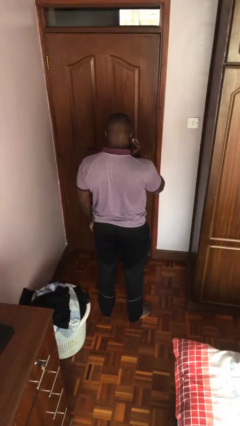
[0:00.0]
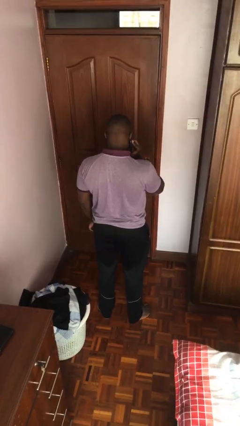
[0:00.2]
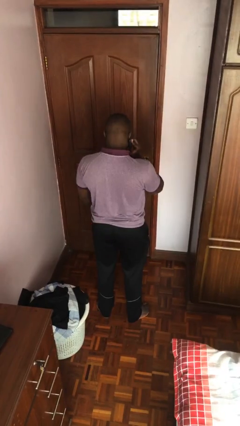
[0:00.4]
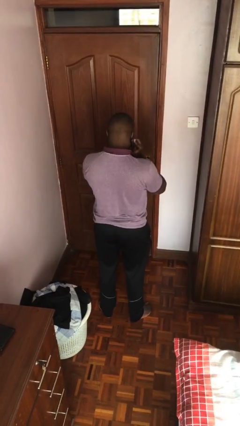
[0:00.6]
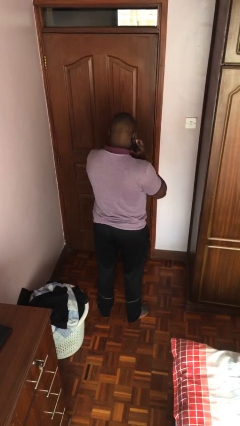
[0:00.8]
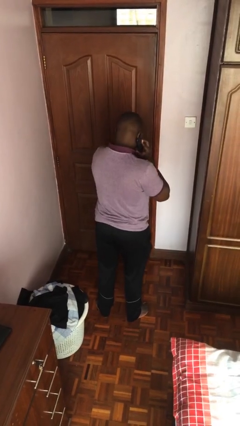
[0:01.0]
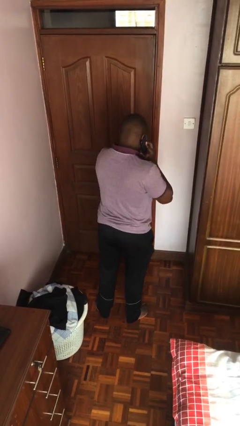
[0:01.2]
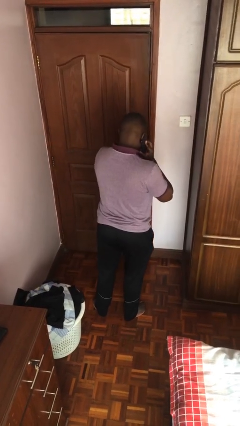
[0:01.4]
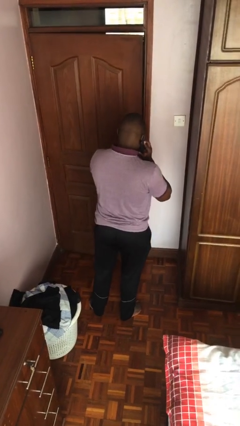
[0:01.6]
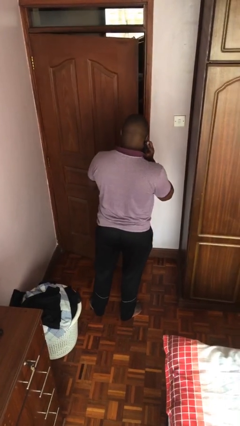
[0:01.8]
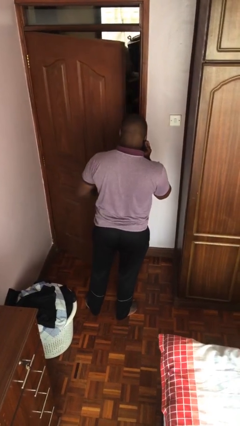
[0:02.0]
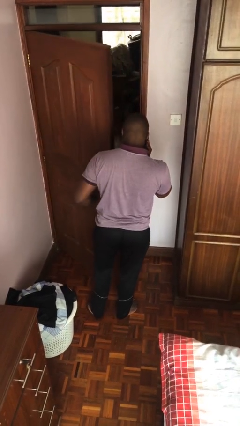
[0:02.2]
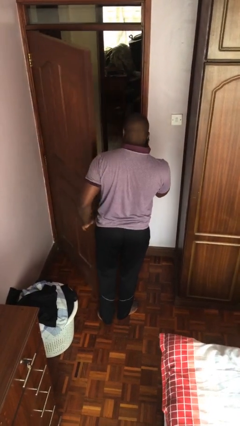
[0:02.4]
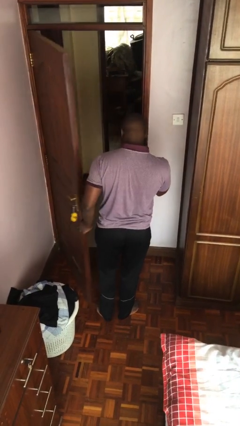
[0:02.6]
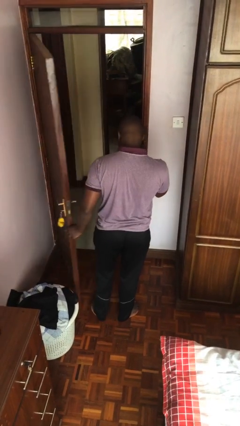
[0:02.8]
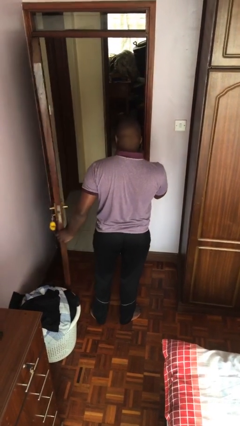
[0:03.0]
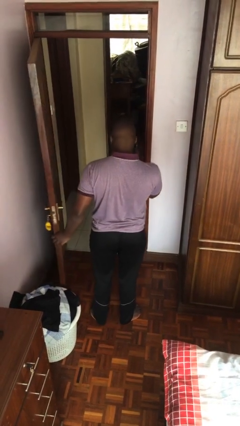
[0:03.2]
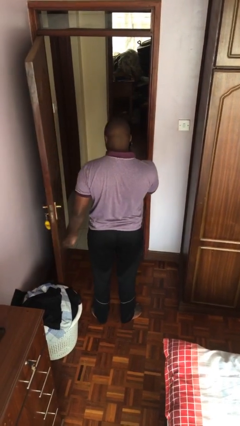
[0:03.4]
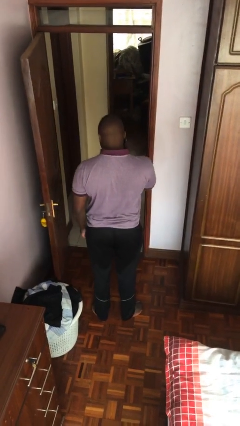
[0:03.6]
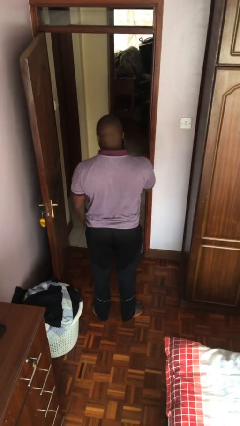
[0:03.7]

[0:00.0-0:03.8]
person opens facility door

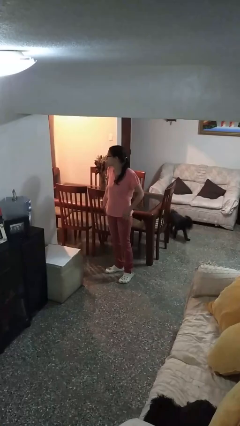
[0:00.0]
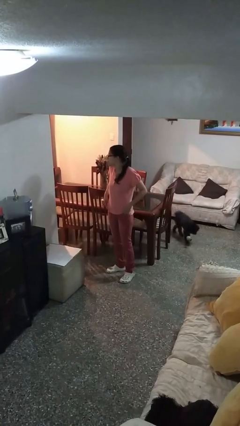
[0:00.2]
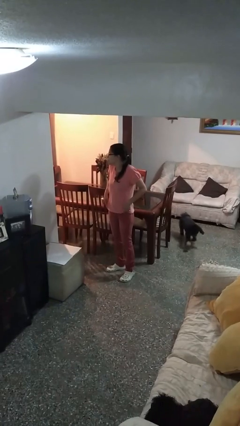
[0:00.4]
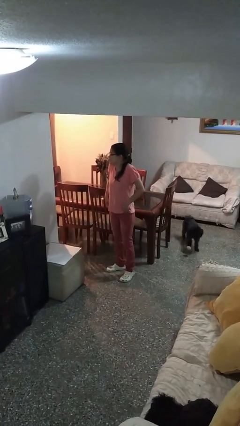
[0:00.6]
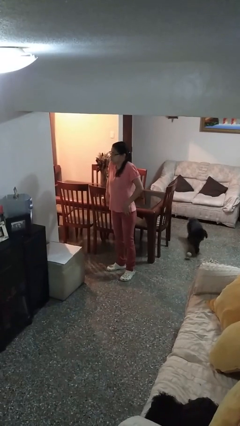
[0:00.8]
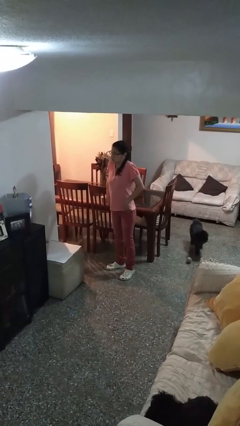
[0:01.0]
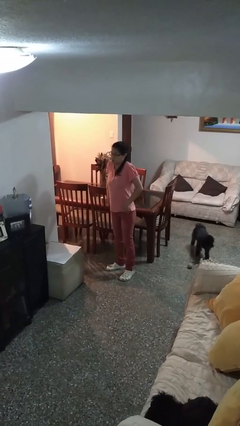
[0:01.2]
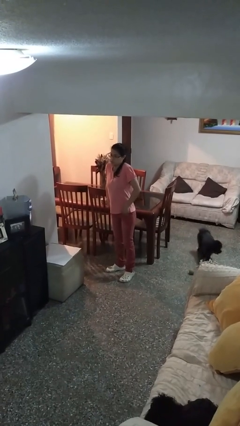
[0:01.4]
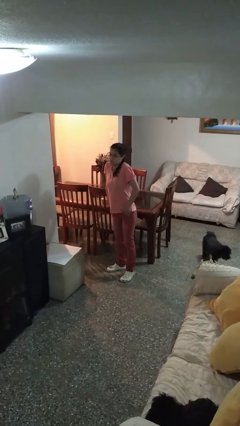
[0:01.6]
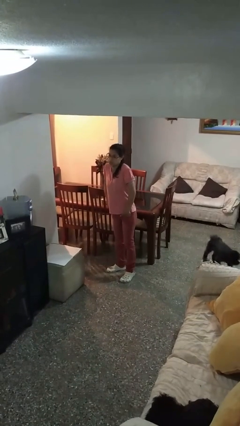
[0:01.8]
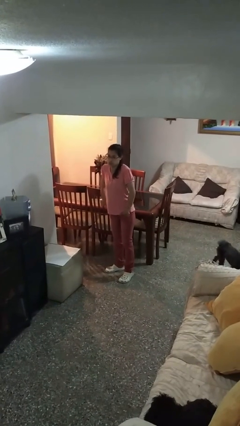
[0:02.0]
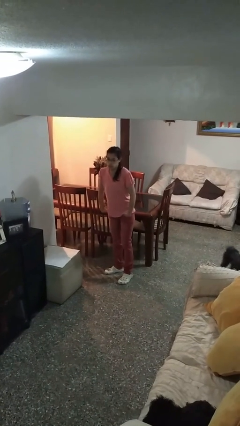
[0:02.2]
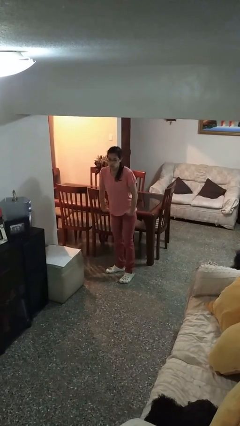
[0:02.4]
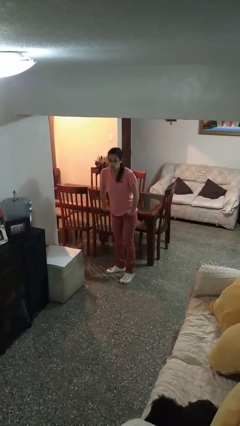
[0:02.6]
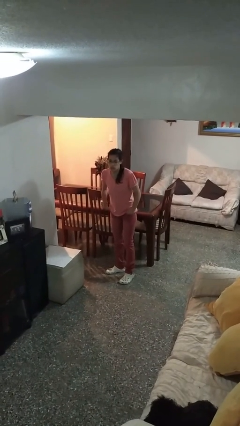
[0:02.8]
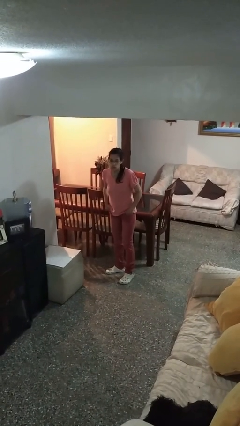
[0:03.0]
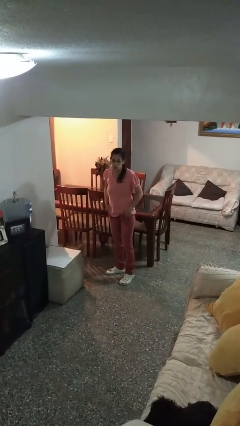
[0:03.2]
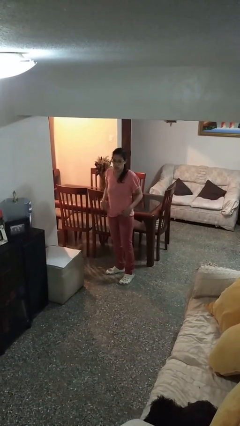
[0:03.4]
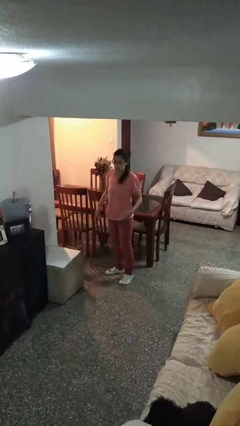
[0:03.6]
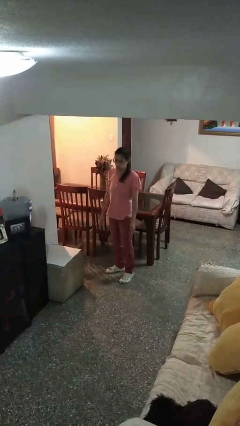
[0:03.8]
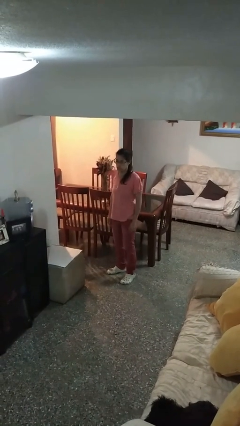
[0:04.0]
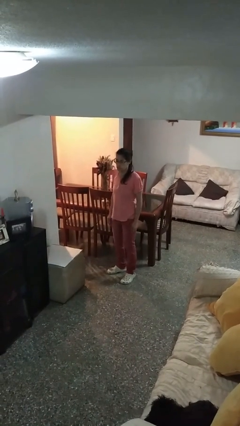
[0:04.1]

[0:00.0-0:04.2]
person puts hands in back pockets

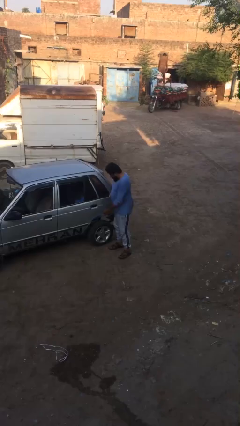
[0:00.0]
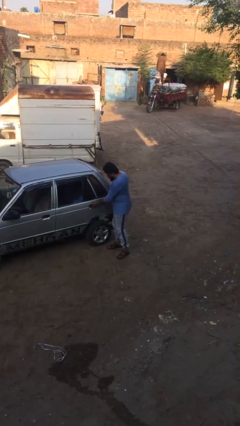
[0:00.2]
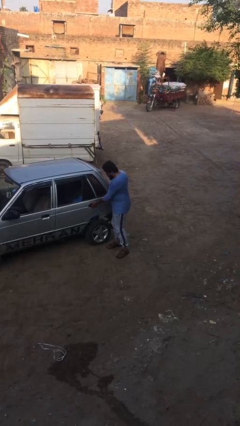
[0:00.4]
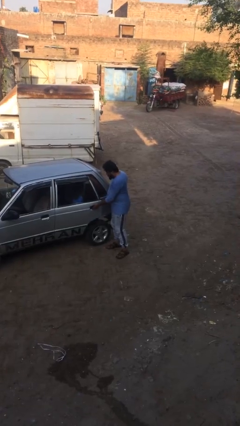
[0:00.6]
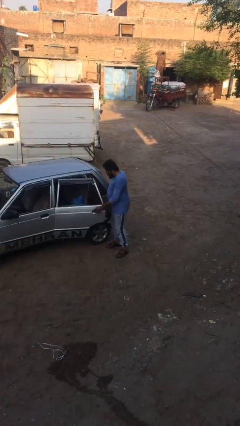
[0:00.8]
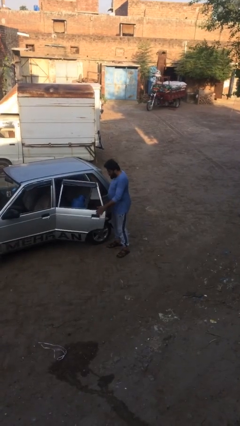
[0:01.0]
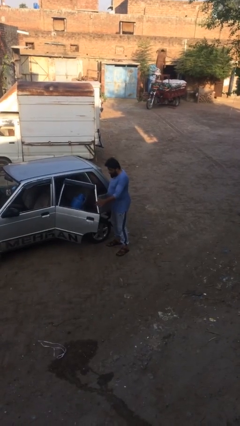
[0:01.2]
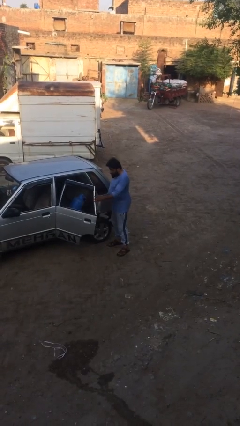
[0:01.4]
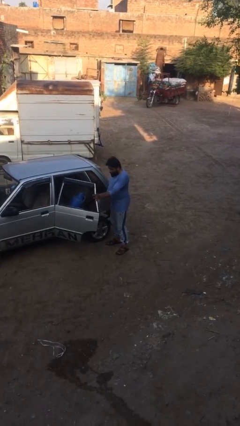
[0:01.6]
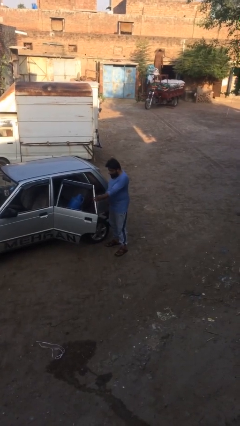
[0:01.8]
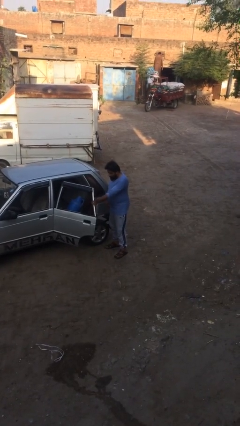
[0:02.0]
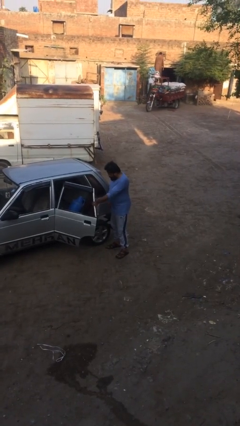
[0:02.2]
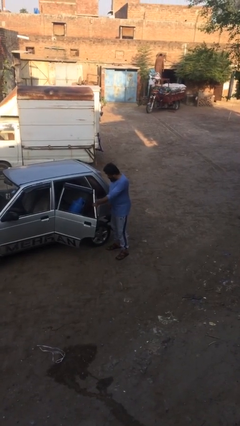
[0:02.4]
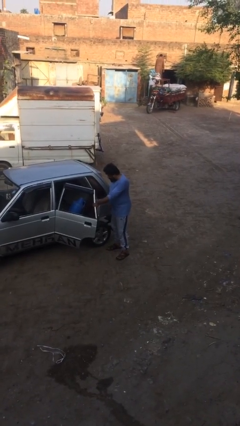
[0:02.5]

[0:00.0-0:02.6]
person opens car door

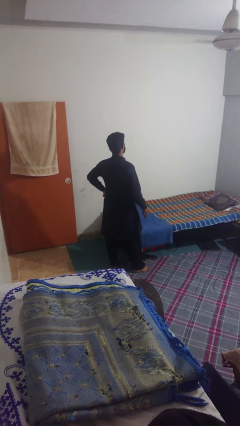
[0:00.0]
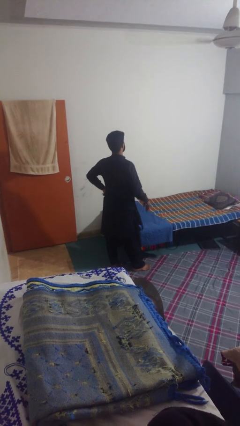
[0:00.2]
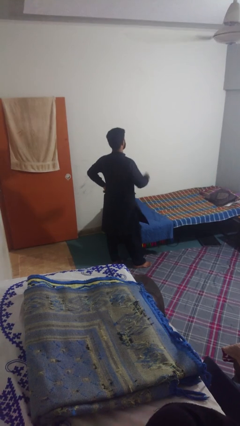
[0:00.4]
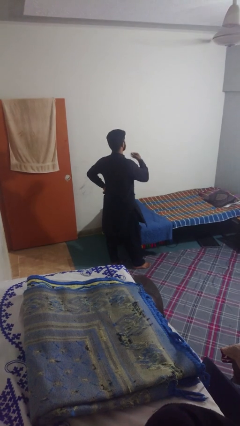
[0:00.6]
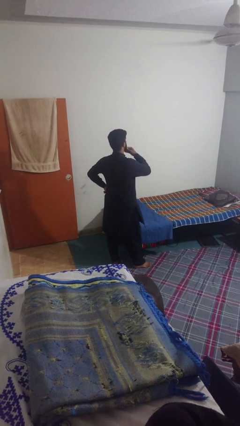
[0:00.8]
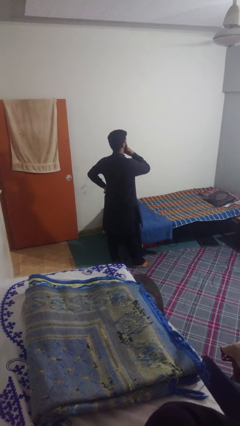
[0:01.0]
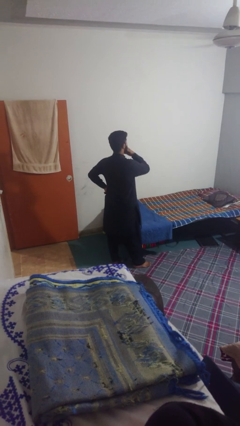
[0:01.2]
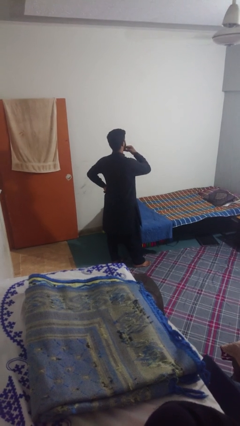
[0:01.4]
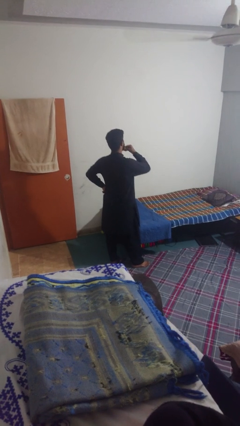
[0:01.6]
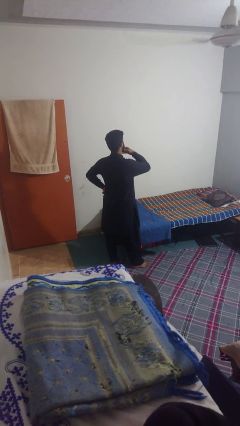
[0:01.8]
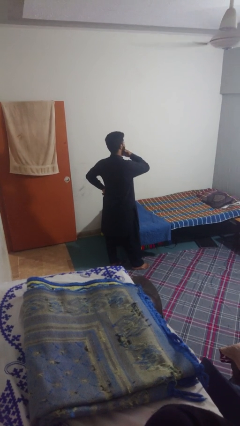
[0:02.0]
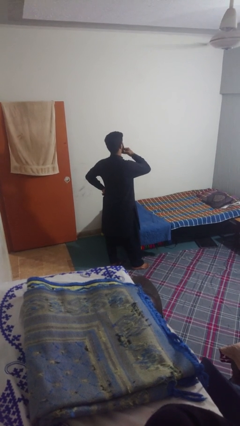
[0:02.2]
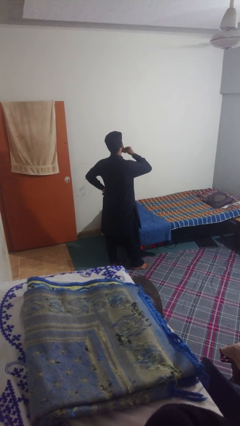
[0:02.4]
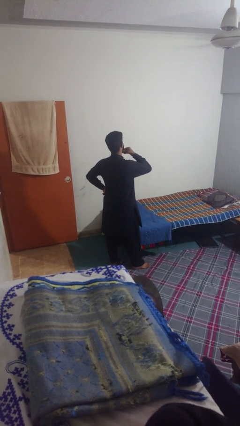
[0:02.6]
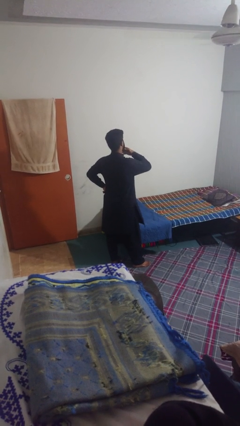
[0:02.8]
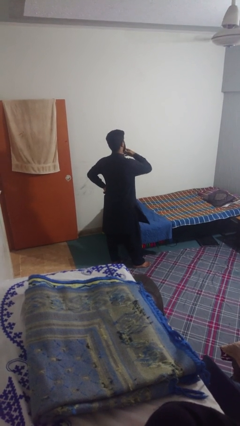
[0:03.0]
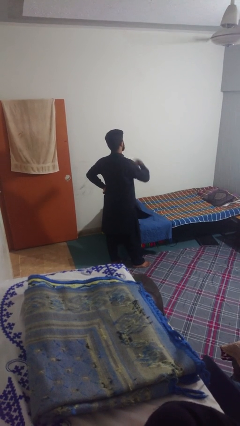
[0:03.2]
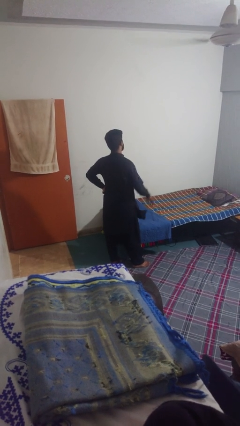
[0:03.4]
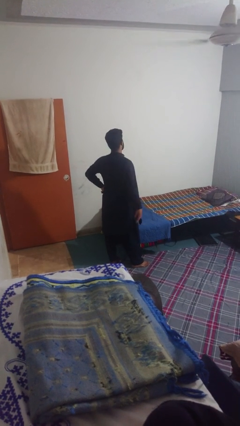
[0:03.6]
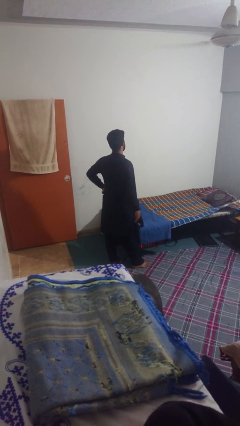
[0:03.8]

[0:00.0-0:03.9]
person strokes chin

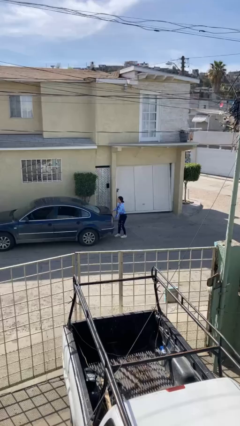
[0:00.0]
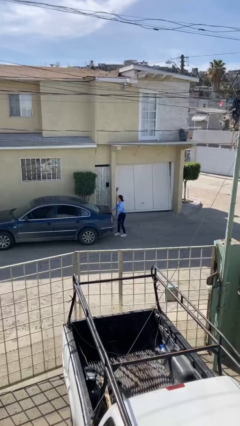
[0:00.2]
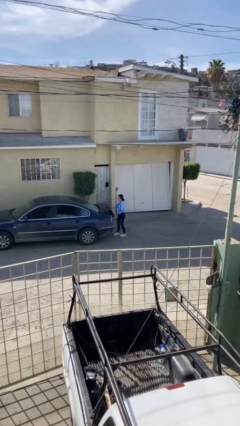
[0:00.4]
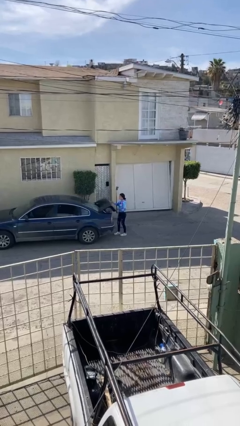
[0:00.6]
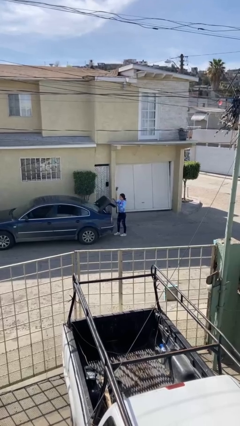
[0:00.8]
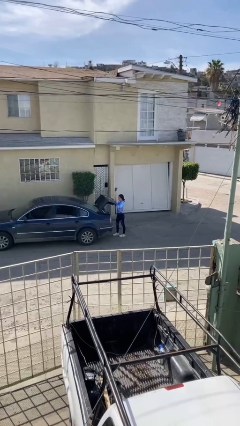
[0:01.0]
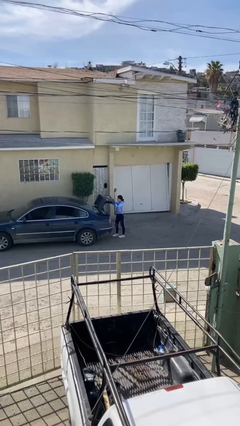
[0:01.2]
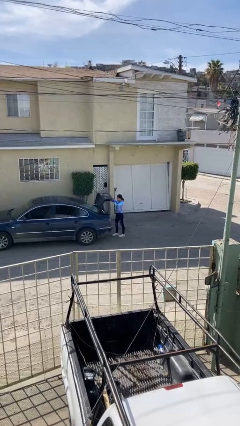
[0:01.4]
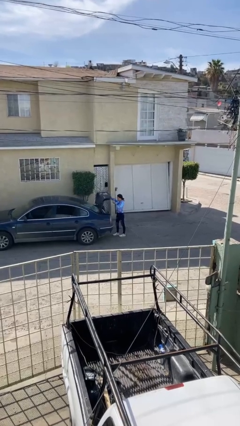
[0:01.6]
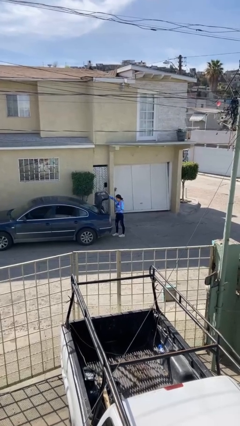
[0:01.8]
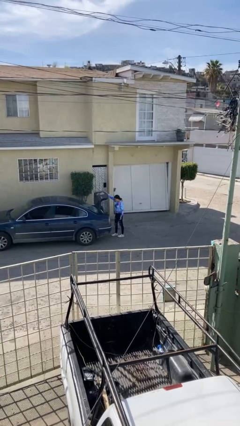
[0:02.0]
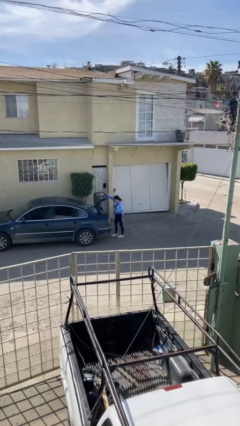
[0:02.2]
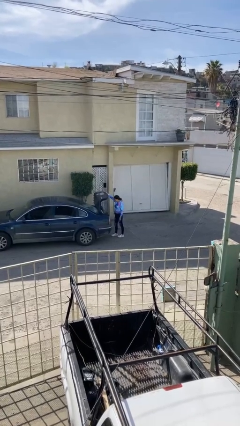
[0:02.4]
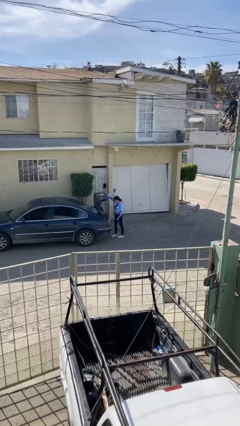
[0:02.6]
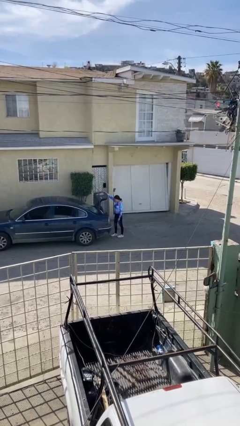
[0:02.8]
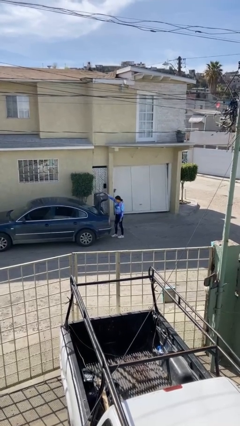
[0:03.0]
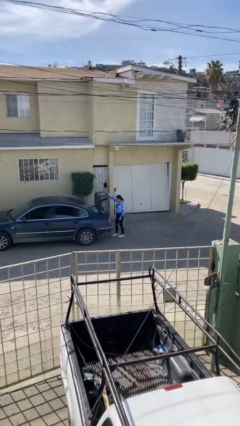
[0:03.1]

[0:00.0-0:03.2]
person opens car trunk
